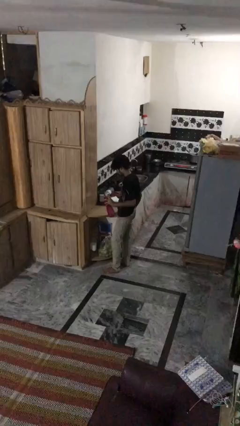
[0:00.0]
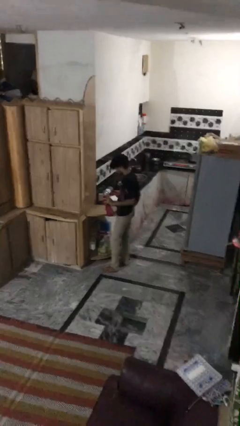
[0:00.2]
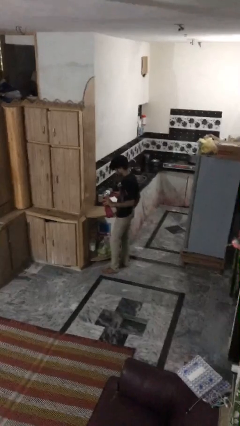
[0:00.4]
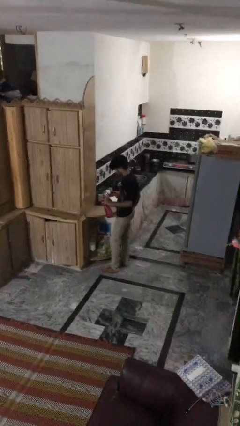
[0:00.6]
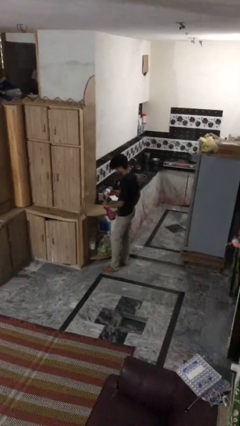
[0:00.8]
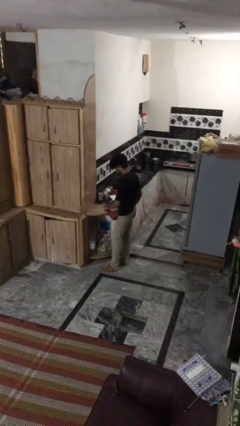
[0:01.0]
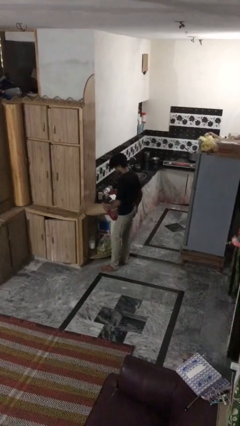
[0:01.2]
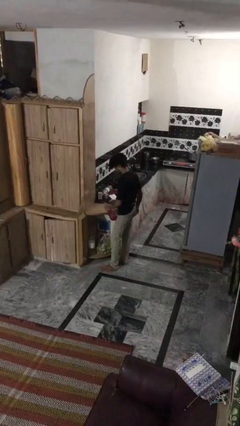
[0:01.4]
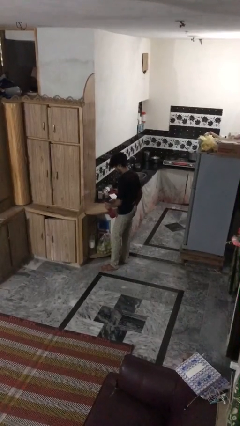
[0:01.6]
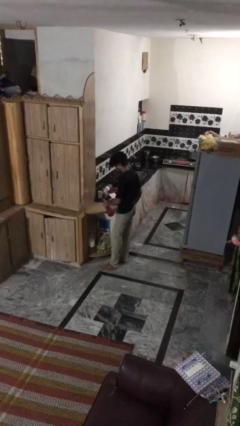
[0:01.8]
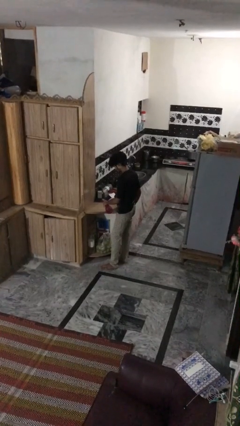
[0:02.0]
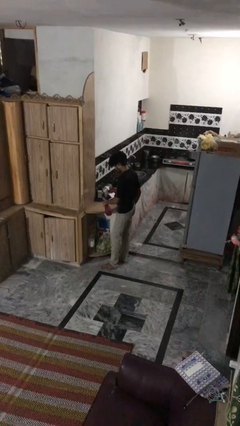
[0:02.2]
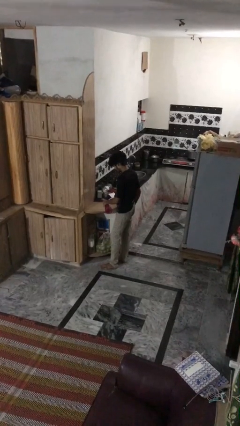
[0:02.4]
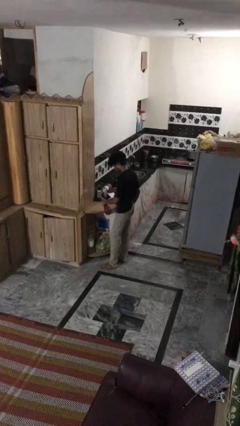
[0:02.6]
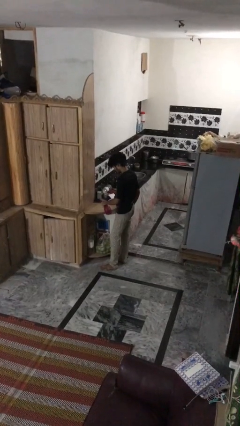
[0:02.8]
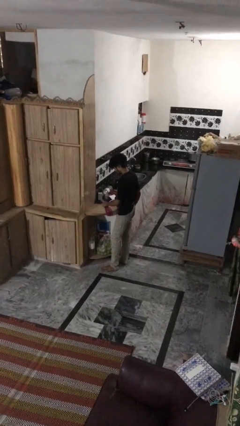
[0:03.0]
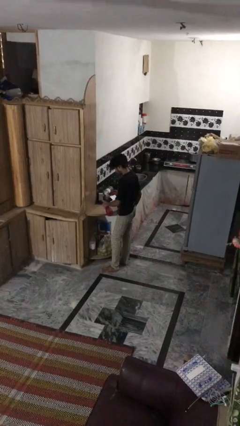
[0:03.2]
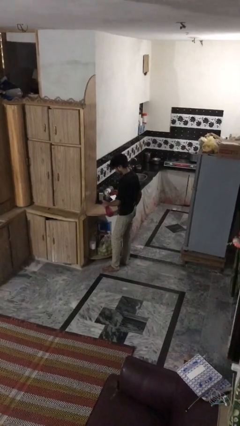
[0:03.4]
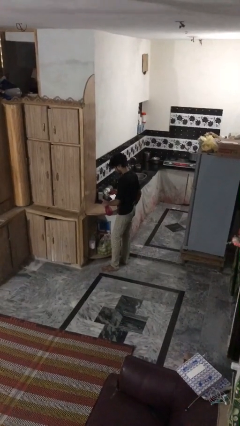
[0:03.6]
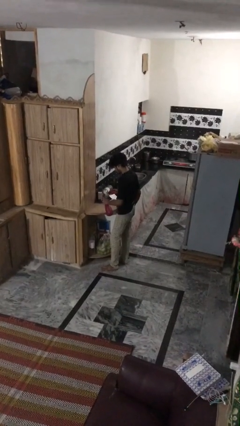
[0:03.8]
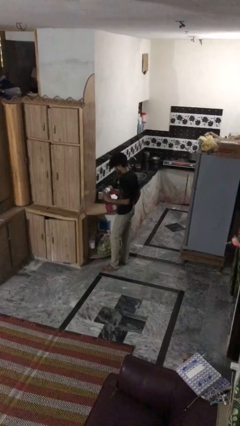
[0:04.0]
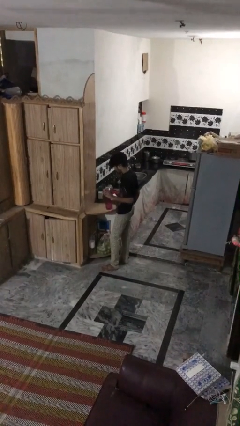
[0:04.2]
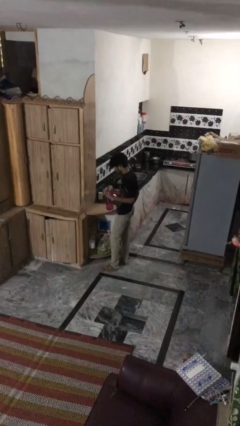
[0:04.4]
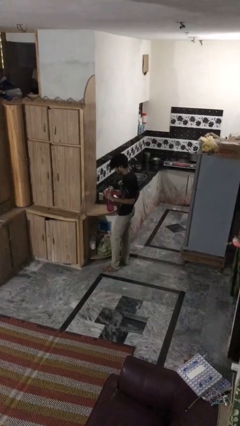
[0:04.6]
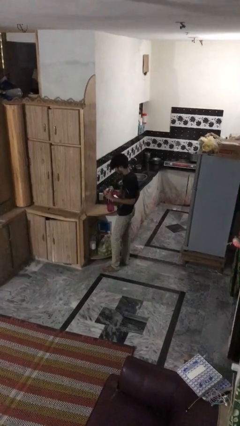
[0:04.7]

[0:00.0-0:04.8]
person sprays from bottle

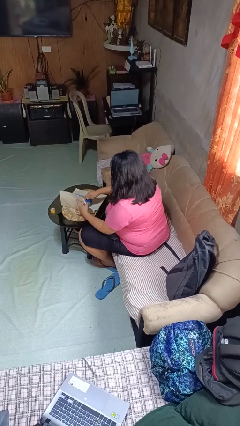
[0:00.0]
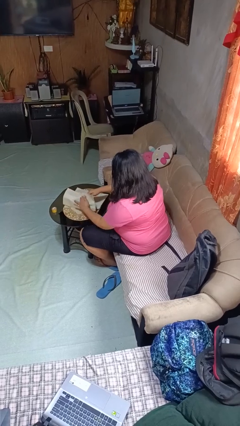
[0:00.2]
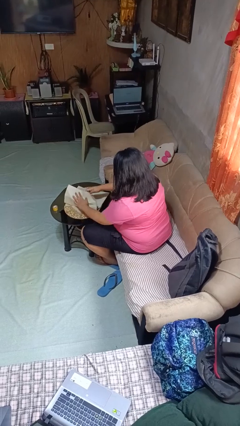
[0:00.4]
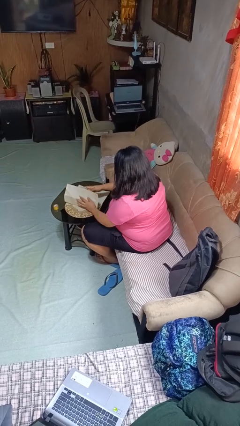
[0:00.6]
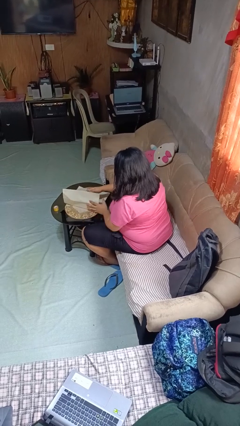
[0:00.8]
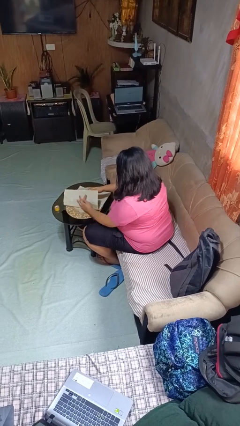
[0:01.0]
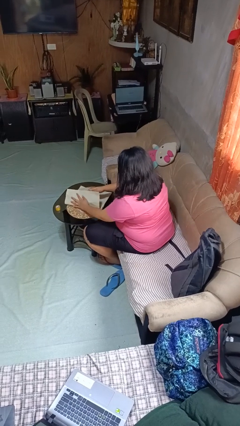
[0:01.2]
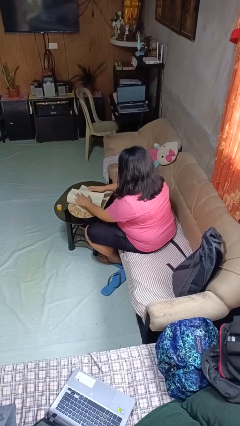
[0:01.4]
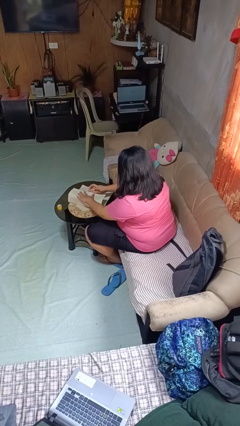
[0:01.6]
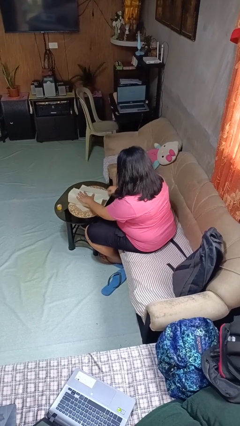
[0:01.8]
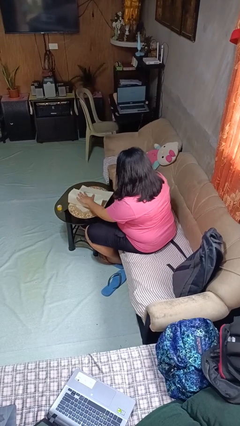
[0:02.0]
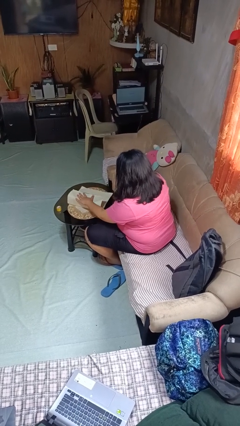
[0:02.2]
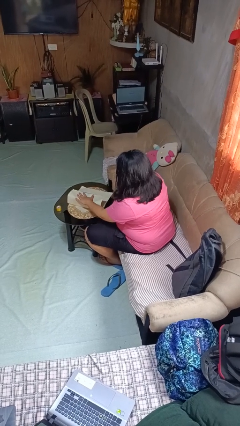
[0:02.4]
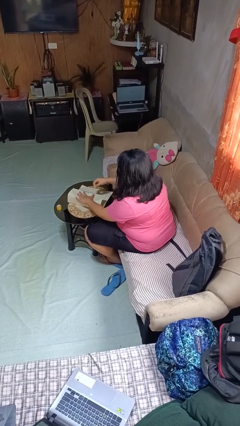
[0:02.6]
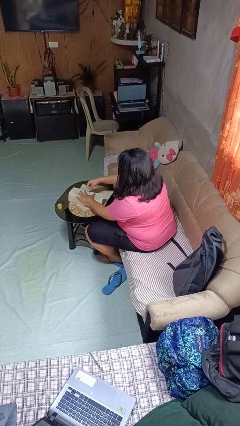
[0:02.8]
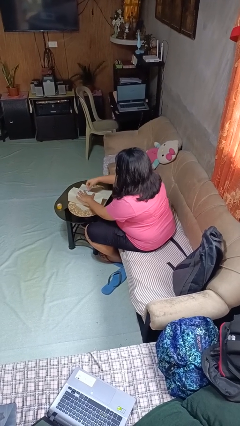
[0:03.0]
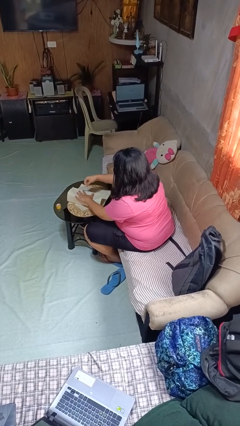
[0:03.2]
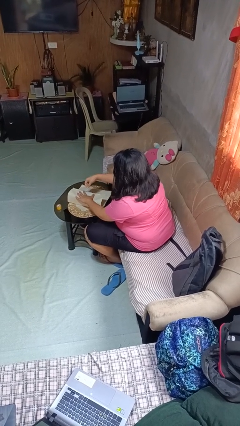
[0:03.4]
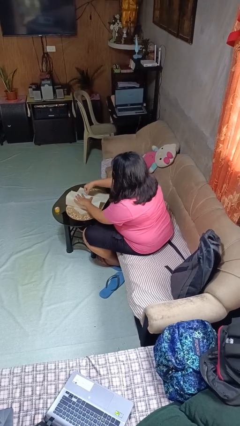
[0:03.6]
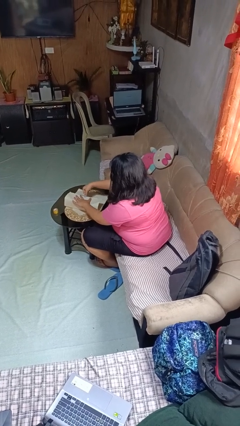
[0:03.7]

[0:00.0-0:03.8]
person wraps box

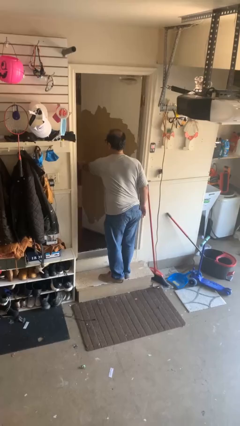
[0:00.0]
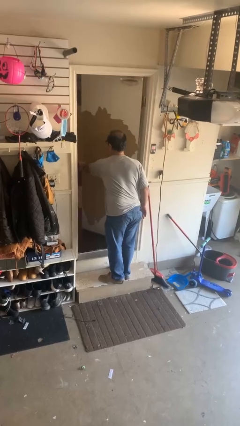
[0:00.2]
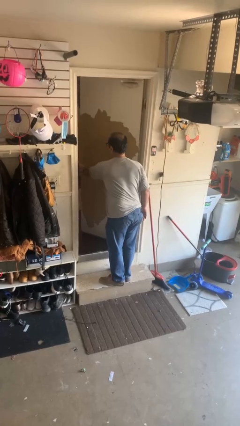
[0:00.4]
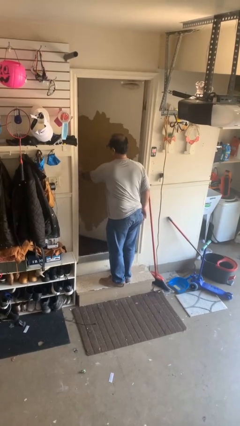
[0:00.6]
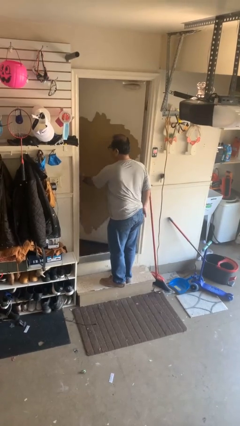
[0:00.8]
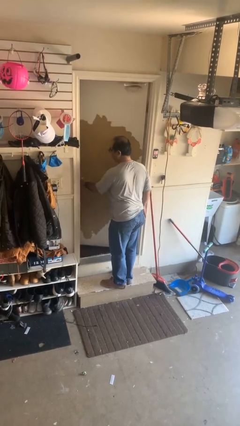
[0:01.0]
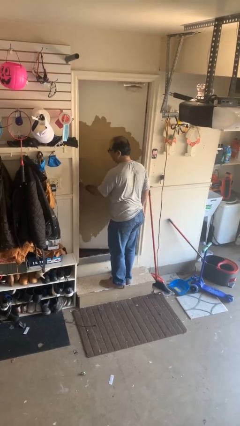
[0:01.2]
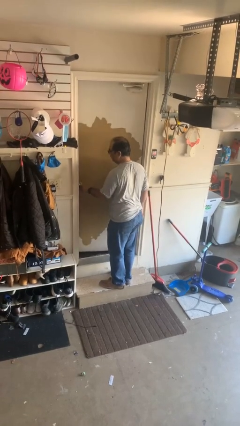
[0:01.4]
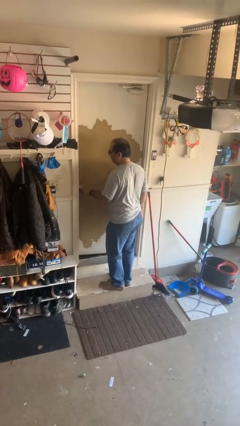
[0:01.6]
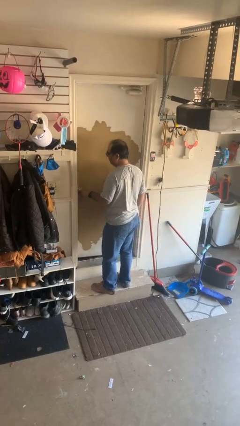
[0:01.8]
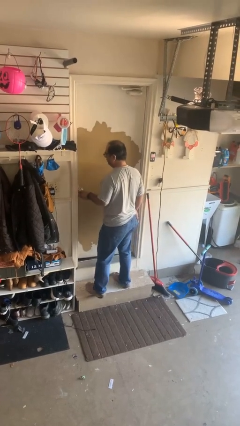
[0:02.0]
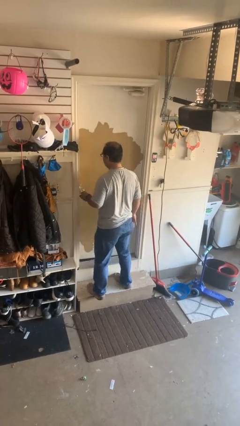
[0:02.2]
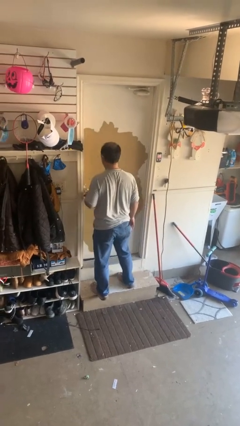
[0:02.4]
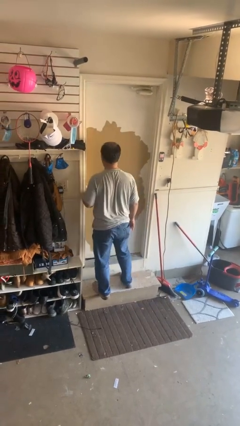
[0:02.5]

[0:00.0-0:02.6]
person closes facility door

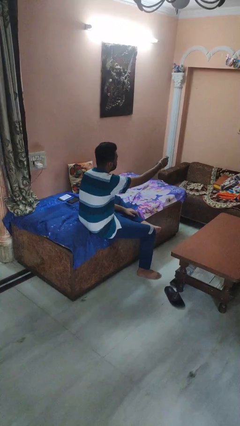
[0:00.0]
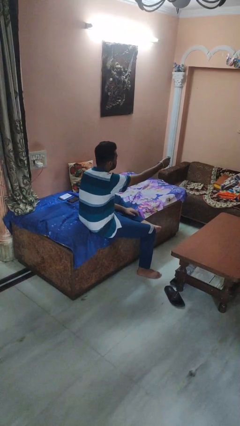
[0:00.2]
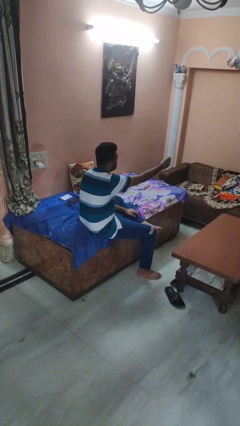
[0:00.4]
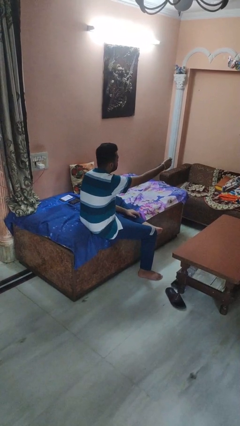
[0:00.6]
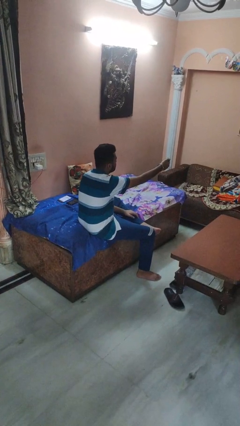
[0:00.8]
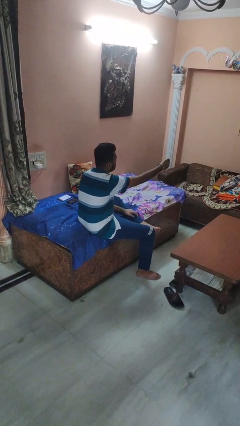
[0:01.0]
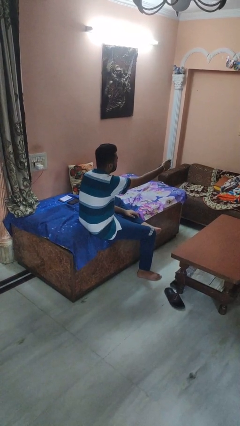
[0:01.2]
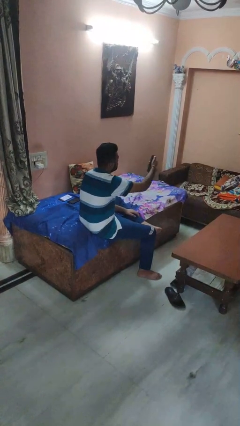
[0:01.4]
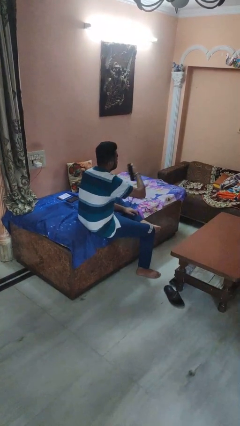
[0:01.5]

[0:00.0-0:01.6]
person uses television remote

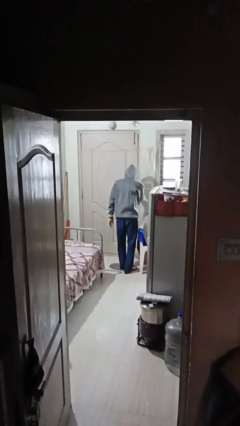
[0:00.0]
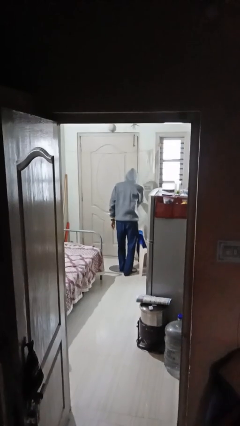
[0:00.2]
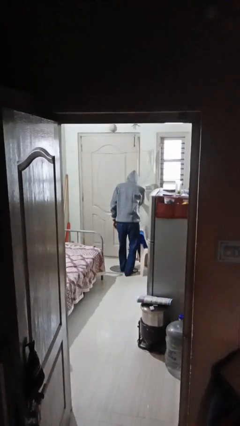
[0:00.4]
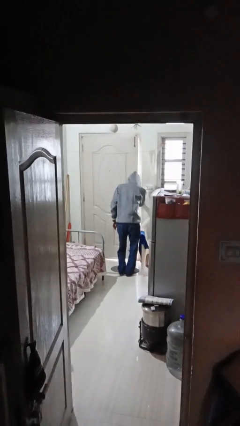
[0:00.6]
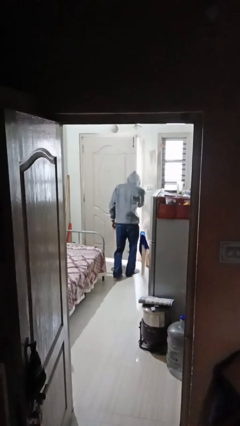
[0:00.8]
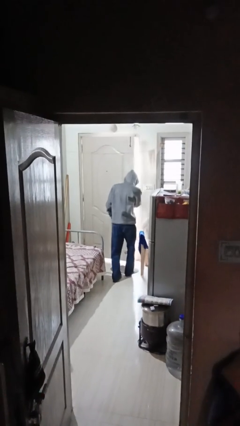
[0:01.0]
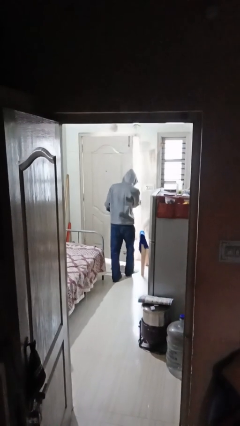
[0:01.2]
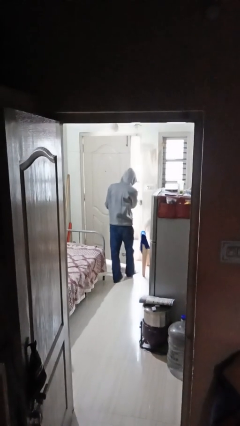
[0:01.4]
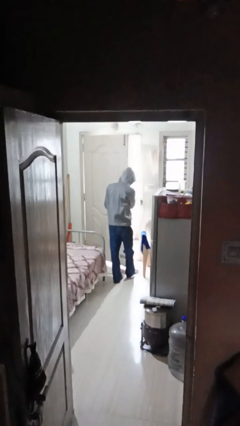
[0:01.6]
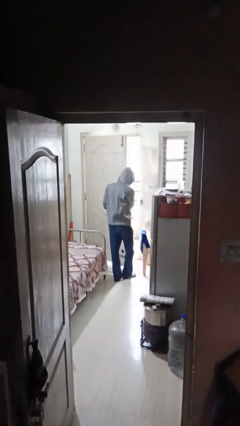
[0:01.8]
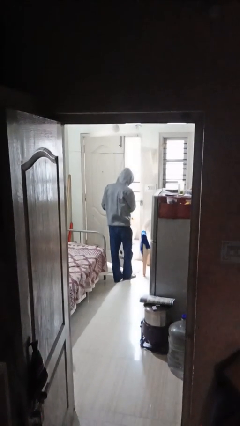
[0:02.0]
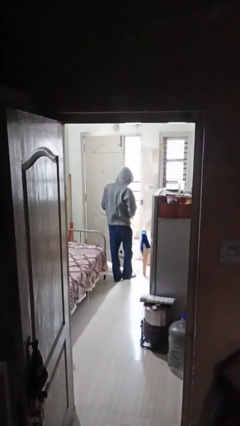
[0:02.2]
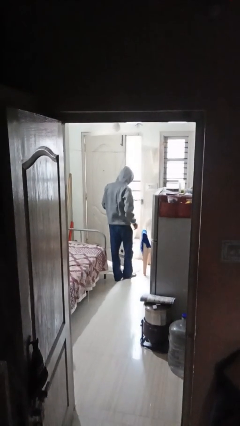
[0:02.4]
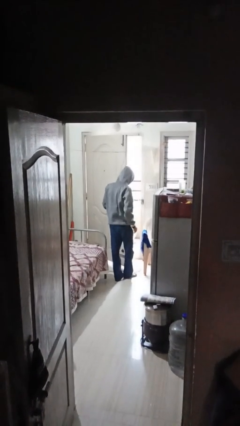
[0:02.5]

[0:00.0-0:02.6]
person opens facility door

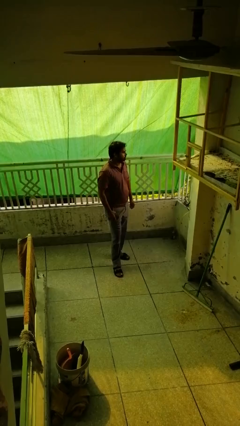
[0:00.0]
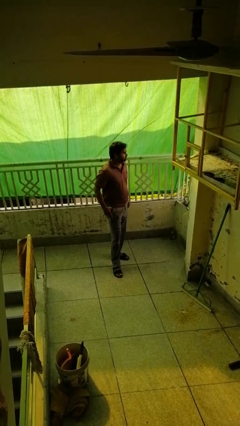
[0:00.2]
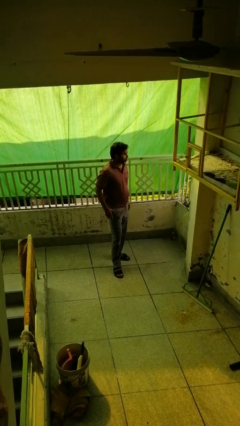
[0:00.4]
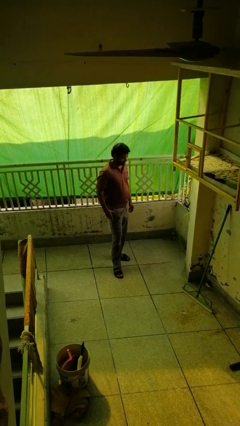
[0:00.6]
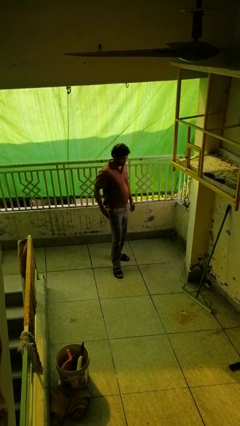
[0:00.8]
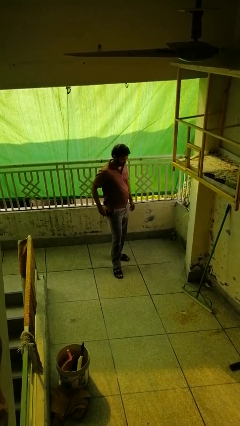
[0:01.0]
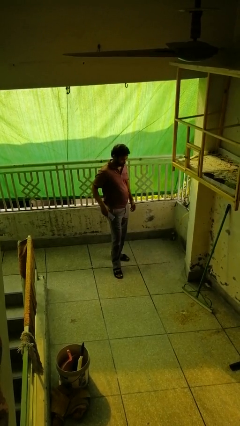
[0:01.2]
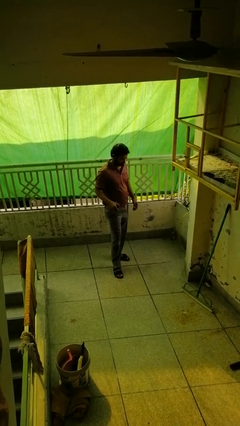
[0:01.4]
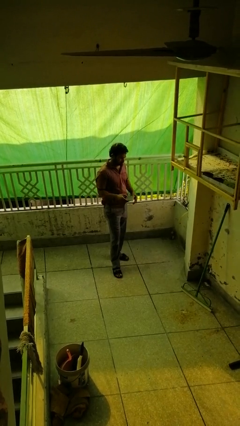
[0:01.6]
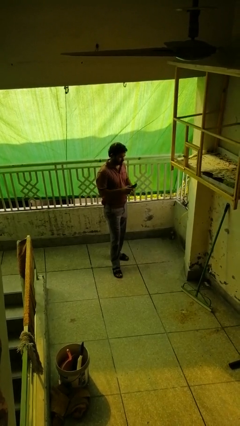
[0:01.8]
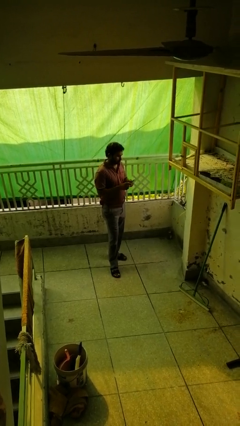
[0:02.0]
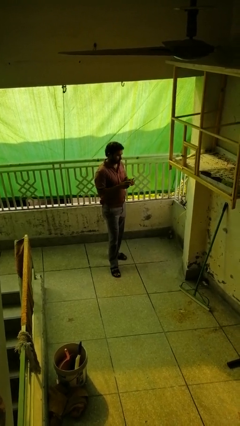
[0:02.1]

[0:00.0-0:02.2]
person takes phone from pocket
